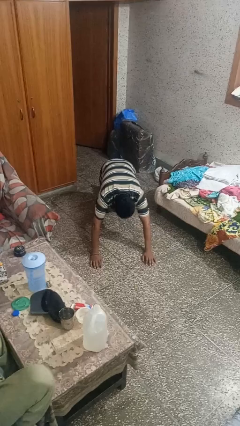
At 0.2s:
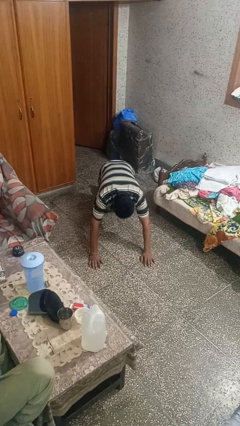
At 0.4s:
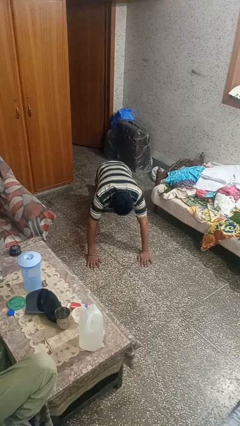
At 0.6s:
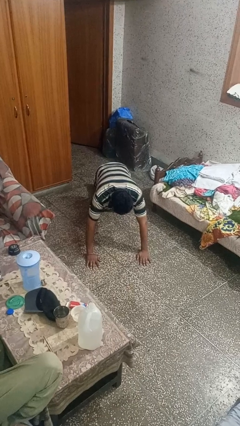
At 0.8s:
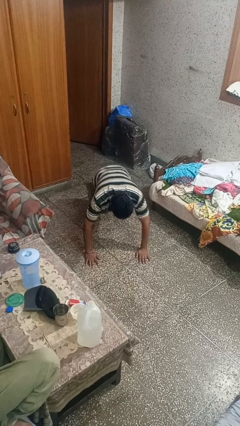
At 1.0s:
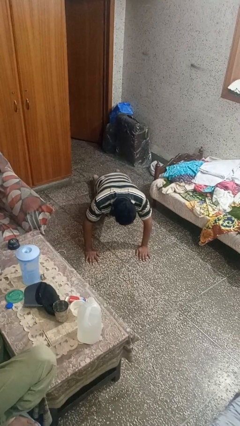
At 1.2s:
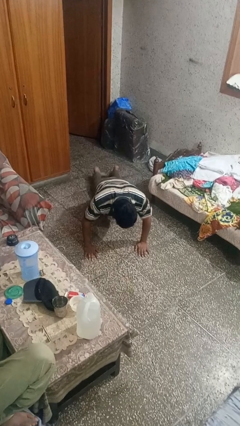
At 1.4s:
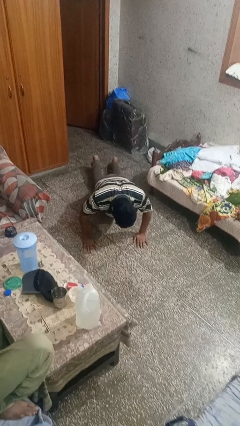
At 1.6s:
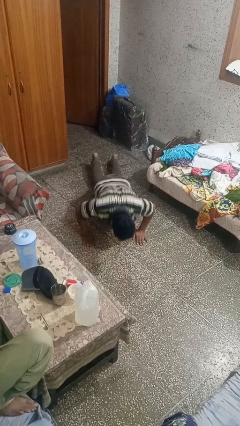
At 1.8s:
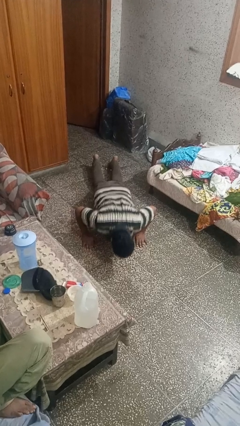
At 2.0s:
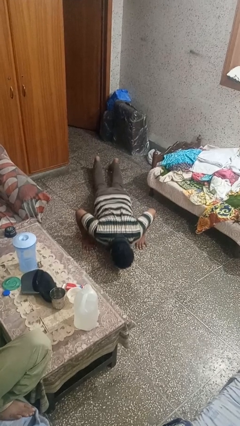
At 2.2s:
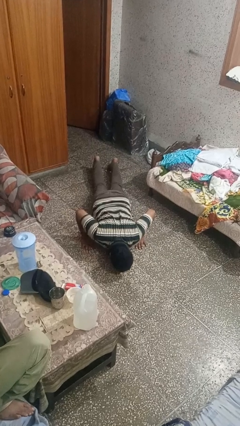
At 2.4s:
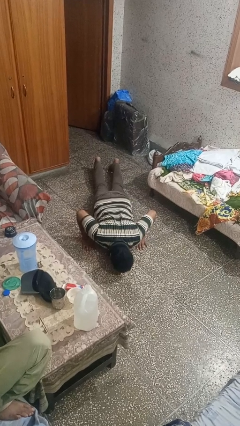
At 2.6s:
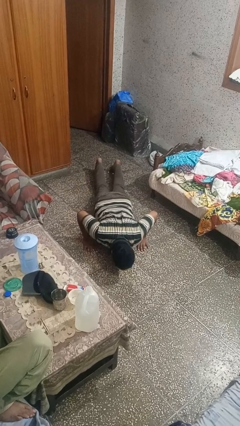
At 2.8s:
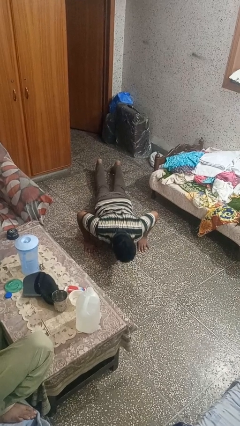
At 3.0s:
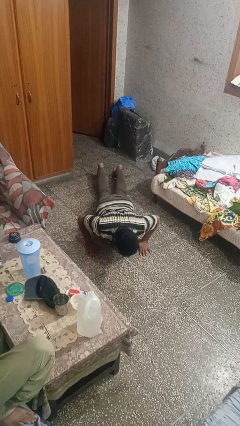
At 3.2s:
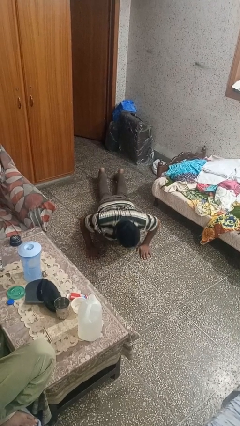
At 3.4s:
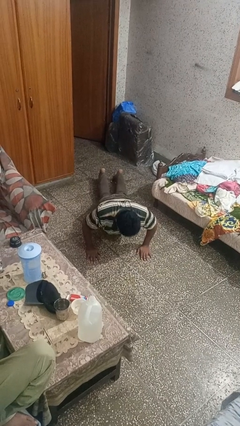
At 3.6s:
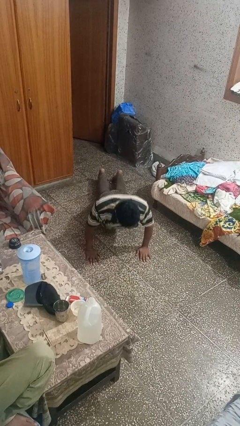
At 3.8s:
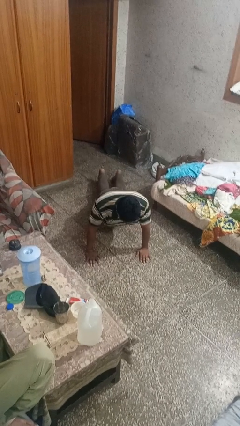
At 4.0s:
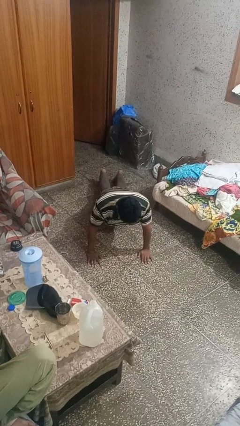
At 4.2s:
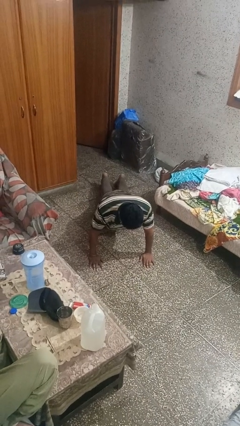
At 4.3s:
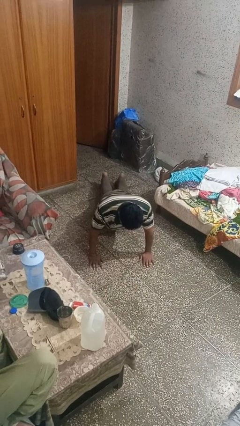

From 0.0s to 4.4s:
person exercises with pushup

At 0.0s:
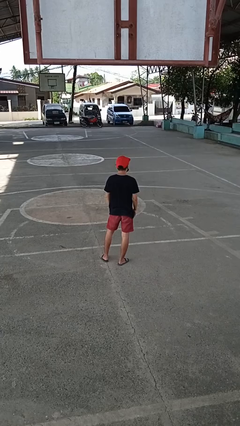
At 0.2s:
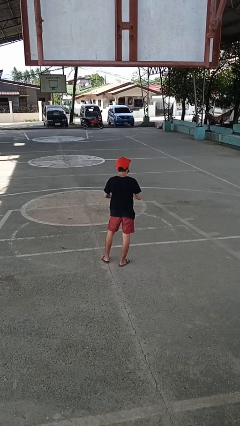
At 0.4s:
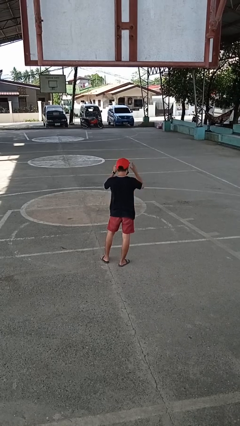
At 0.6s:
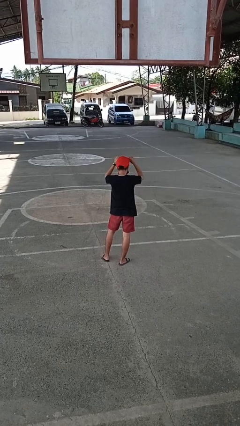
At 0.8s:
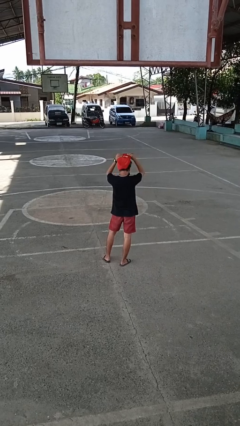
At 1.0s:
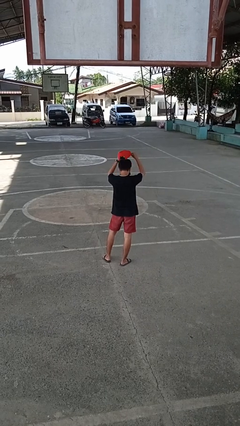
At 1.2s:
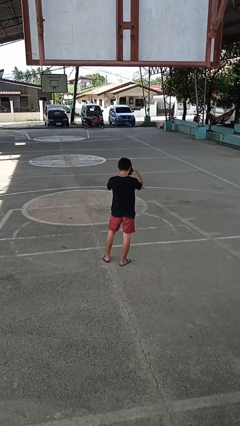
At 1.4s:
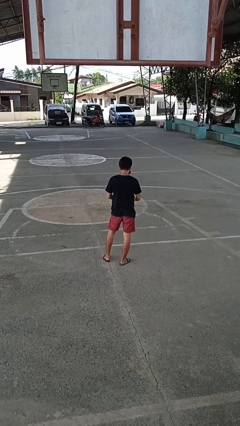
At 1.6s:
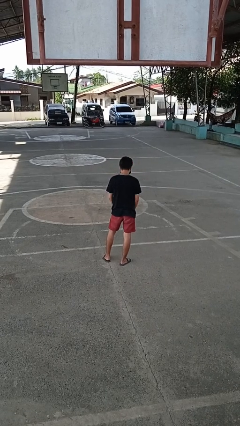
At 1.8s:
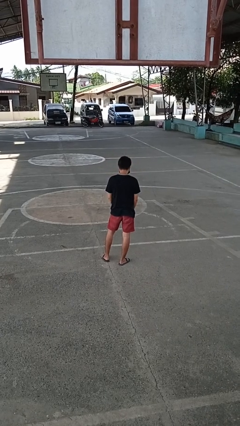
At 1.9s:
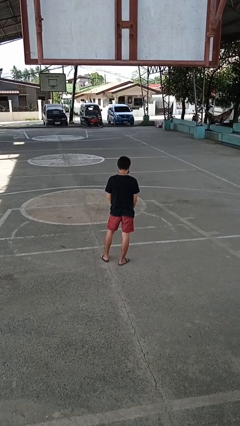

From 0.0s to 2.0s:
person takes off hat

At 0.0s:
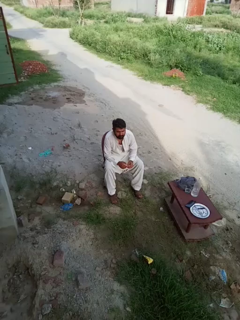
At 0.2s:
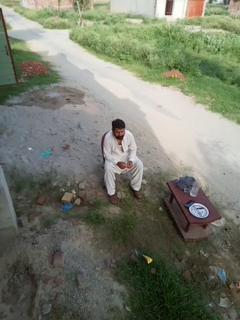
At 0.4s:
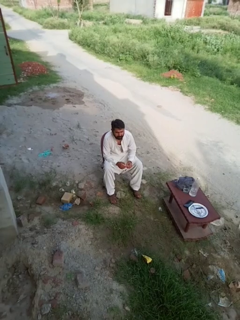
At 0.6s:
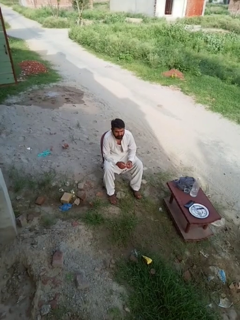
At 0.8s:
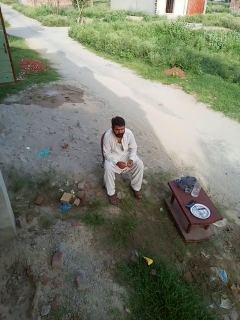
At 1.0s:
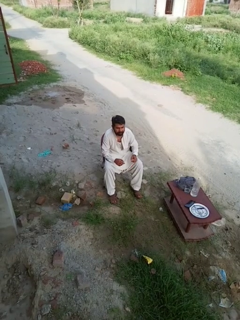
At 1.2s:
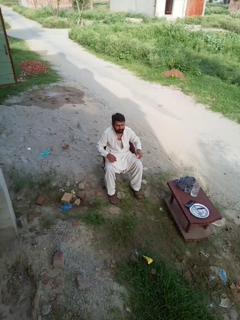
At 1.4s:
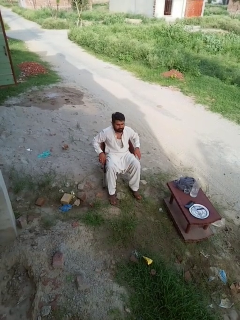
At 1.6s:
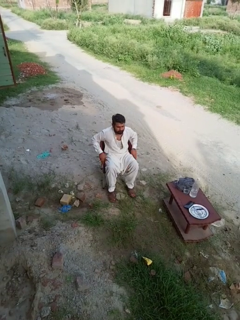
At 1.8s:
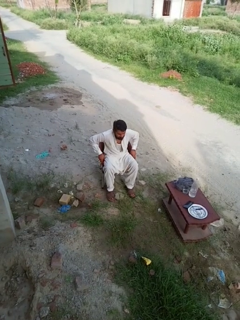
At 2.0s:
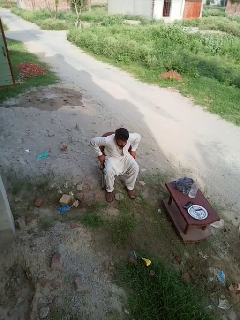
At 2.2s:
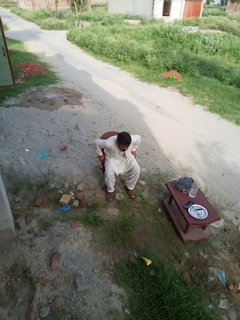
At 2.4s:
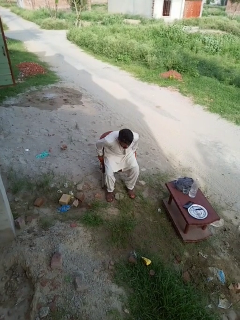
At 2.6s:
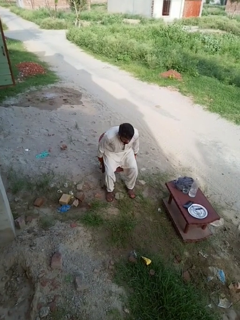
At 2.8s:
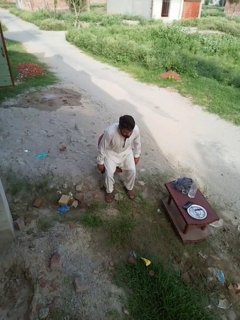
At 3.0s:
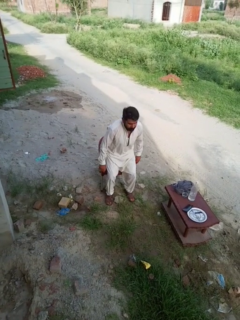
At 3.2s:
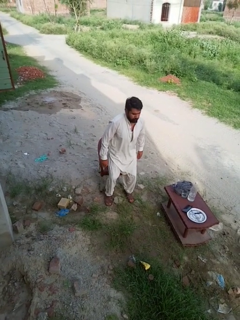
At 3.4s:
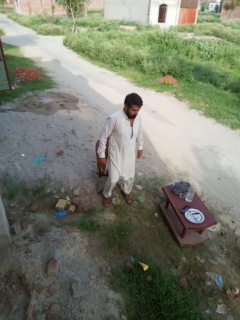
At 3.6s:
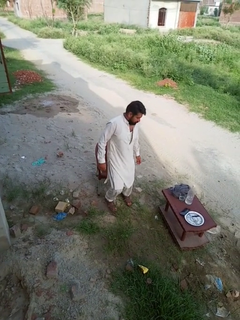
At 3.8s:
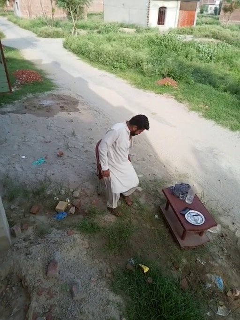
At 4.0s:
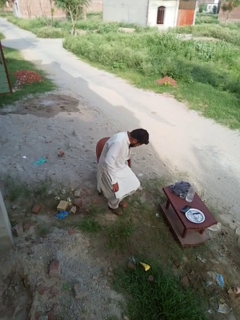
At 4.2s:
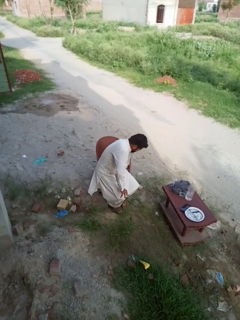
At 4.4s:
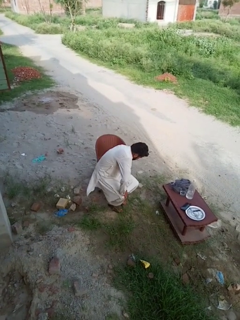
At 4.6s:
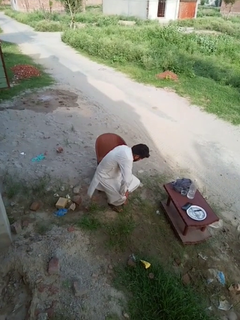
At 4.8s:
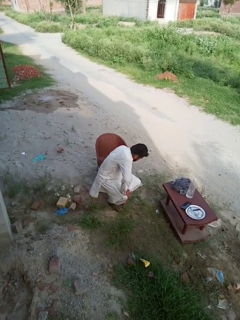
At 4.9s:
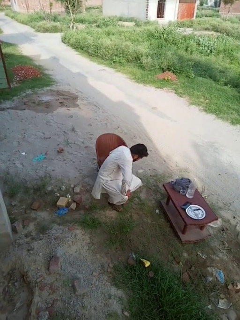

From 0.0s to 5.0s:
person falls from chair

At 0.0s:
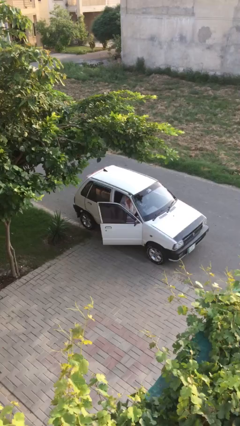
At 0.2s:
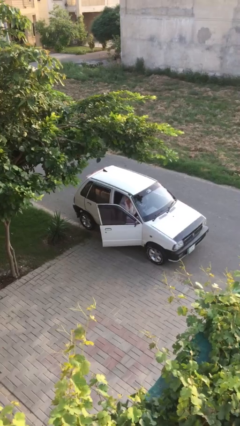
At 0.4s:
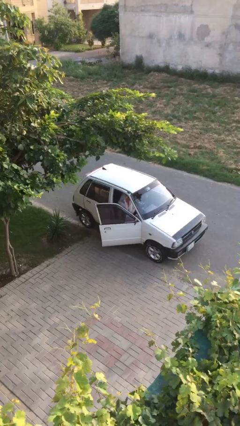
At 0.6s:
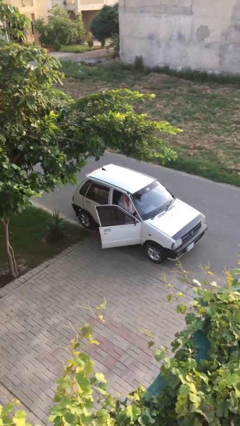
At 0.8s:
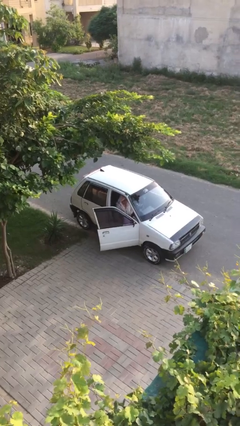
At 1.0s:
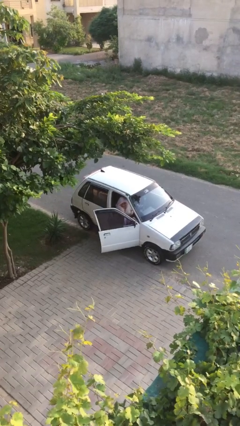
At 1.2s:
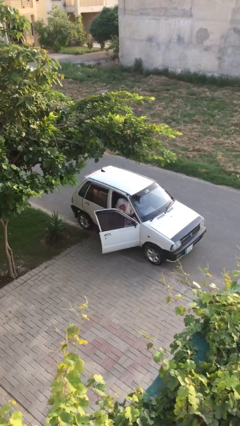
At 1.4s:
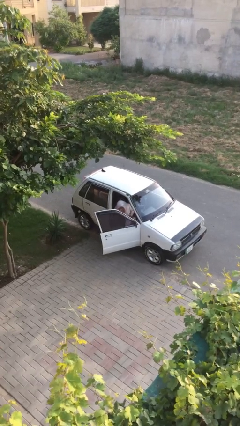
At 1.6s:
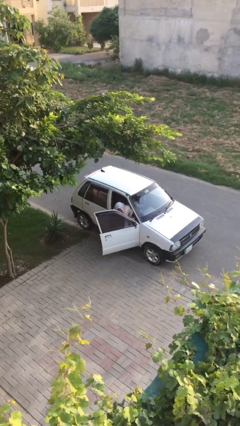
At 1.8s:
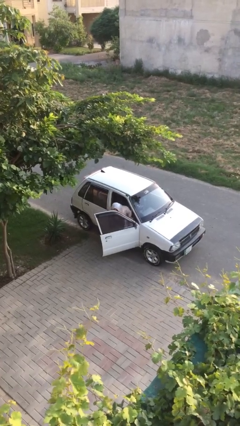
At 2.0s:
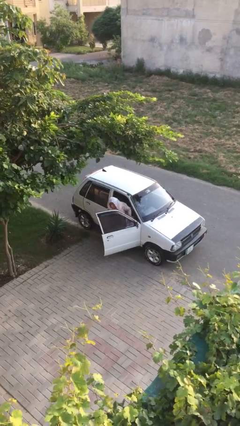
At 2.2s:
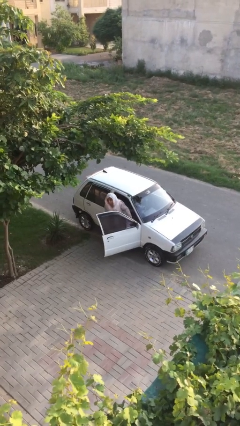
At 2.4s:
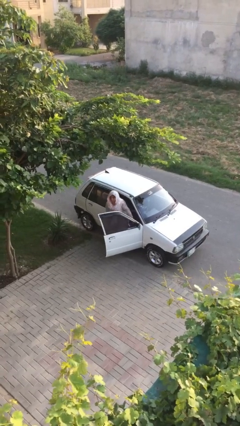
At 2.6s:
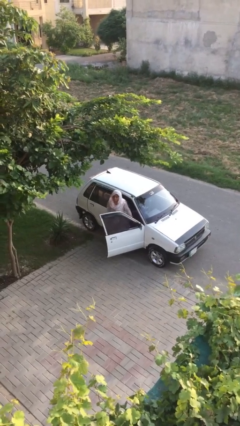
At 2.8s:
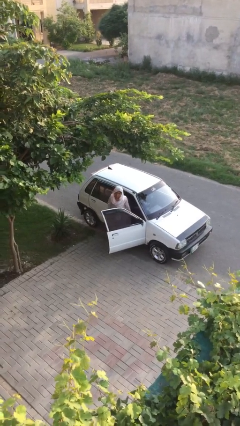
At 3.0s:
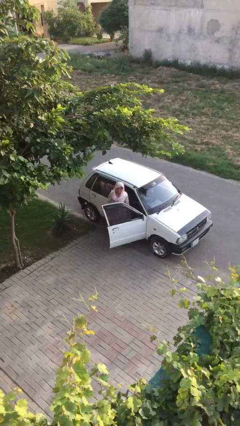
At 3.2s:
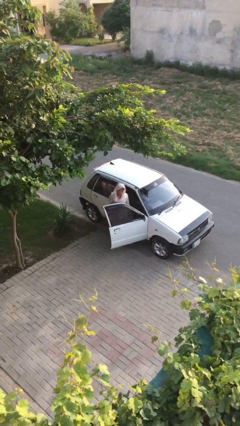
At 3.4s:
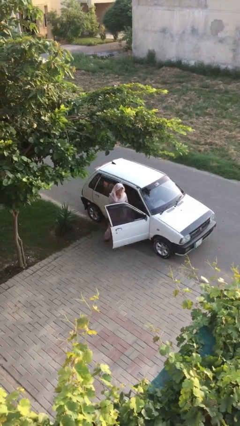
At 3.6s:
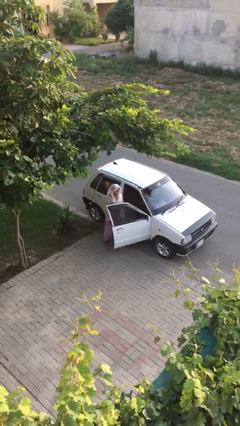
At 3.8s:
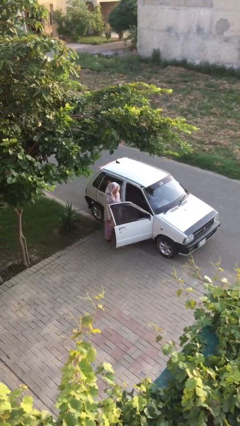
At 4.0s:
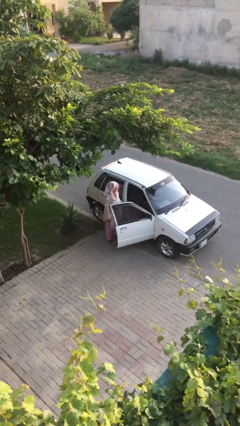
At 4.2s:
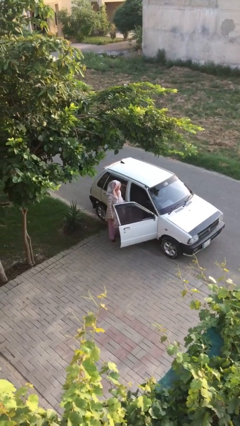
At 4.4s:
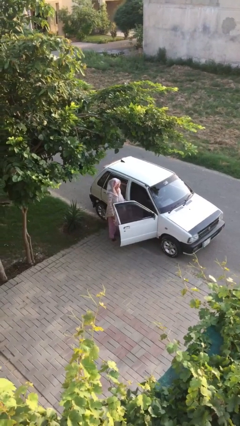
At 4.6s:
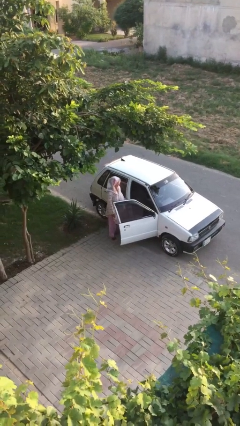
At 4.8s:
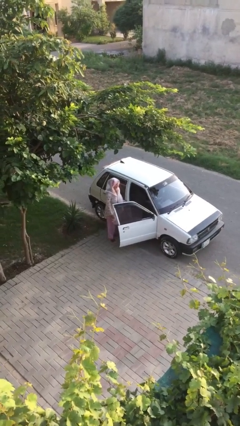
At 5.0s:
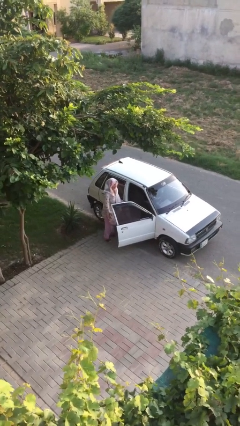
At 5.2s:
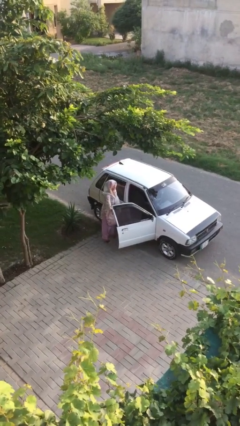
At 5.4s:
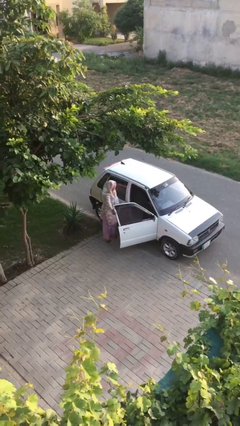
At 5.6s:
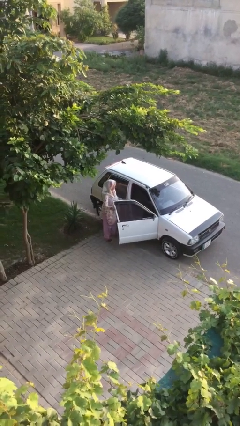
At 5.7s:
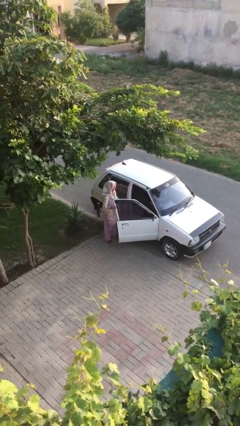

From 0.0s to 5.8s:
person exits car

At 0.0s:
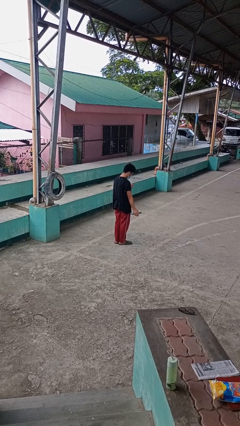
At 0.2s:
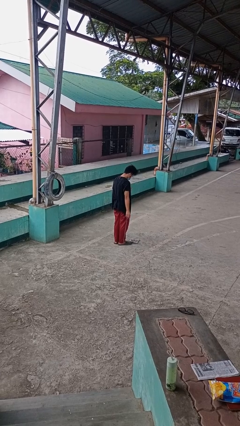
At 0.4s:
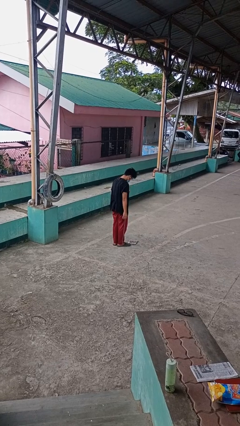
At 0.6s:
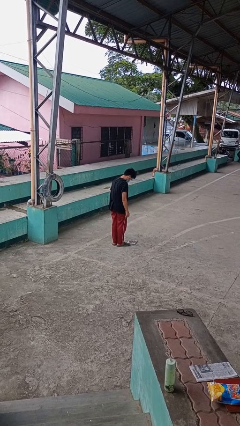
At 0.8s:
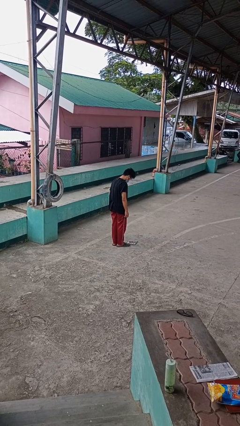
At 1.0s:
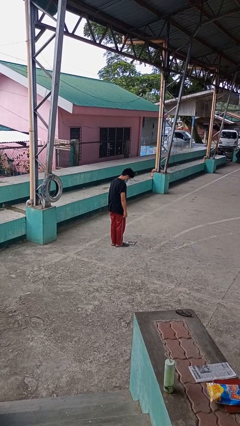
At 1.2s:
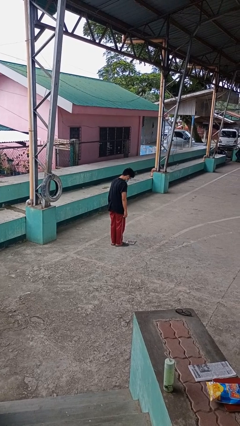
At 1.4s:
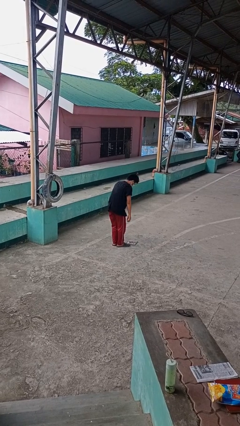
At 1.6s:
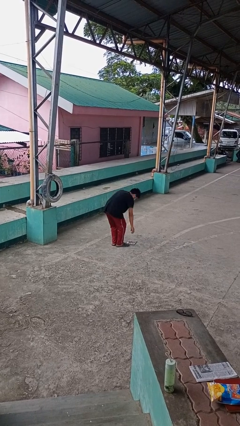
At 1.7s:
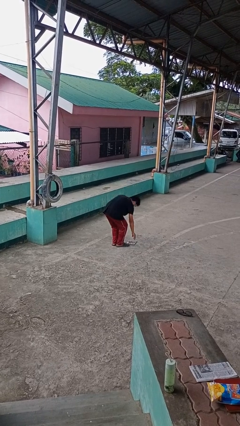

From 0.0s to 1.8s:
person drops object
